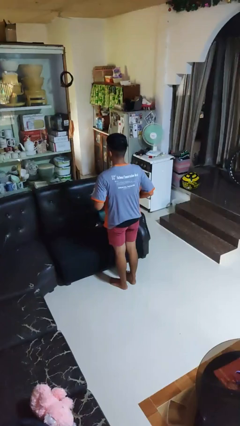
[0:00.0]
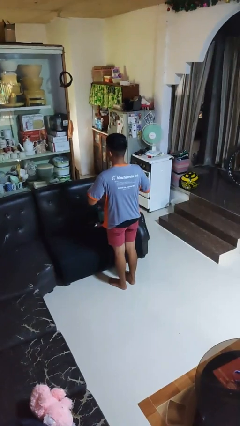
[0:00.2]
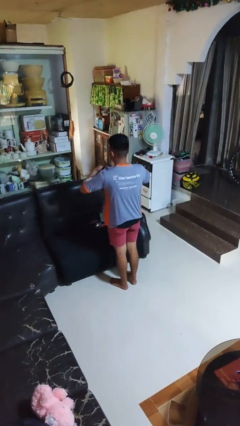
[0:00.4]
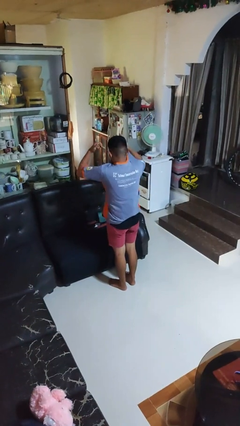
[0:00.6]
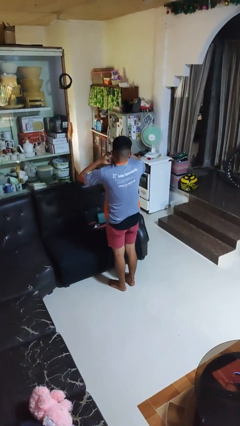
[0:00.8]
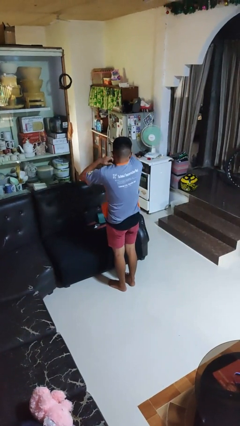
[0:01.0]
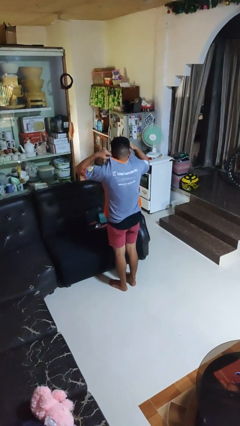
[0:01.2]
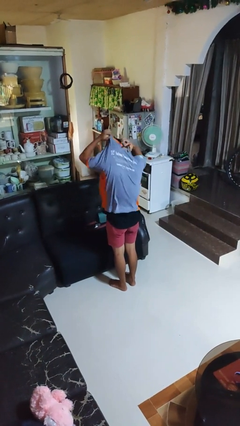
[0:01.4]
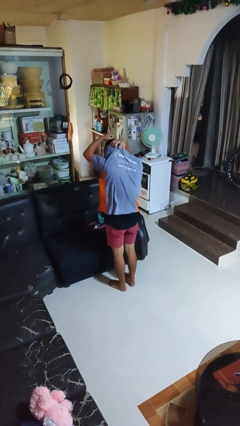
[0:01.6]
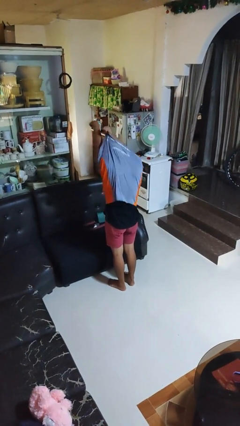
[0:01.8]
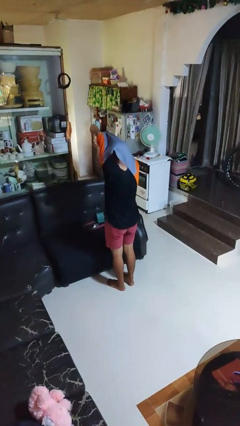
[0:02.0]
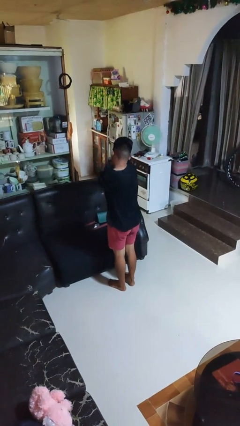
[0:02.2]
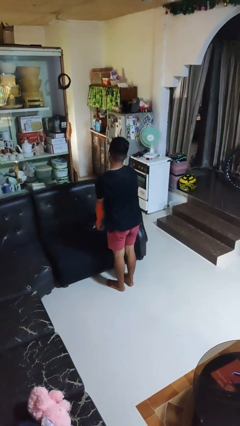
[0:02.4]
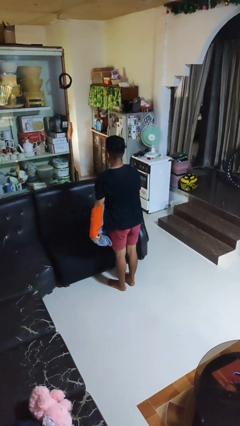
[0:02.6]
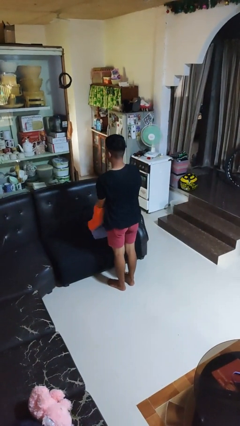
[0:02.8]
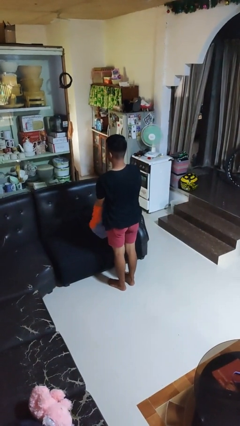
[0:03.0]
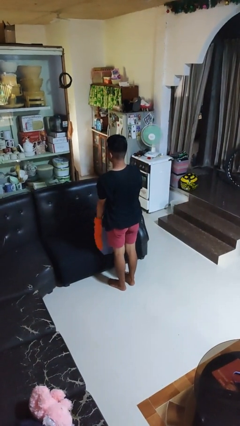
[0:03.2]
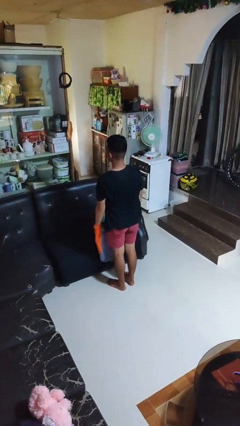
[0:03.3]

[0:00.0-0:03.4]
person takes off shirt

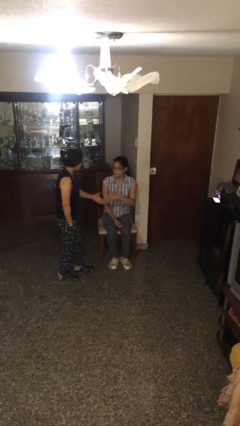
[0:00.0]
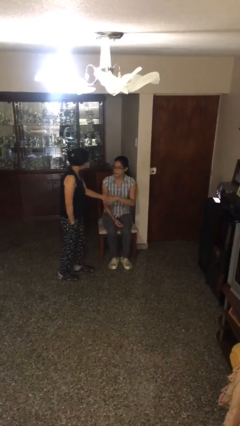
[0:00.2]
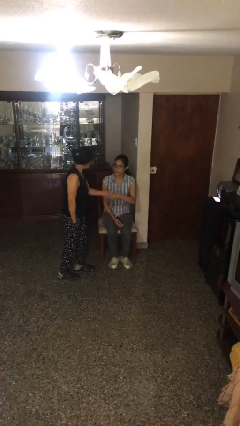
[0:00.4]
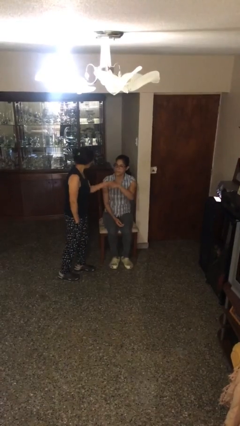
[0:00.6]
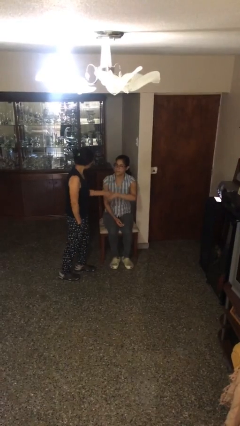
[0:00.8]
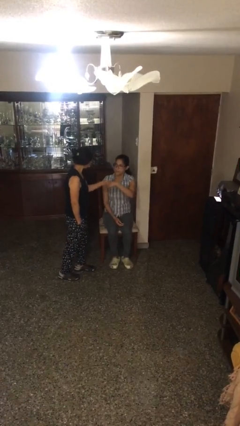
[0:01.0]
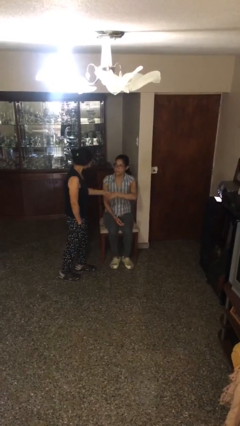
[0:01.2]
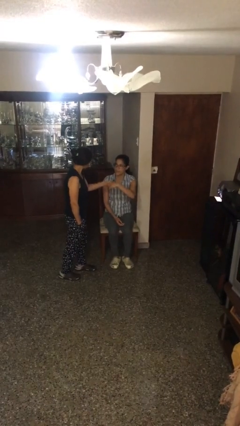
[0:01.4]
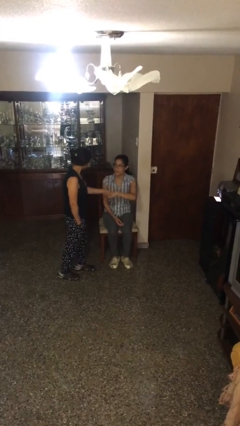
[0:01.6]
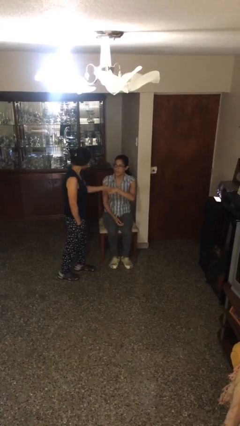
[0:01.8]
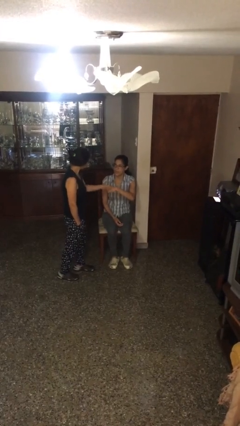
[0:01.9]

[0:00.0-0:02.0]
person shakes hand

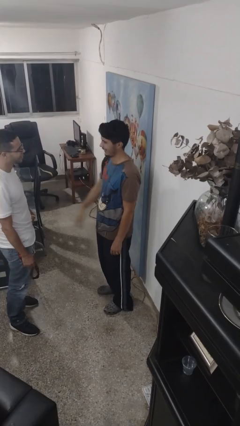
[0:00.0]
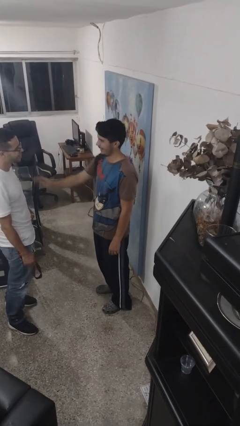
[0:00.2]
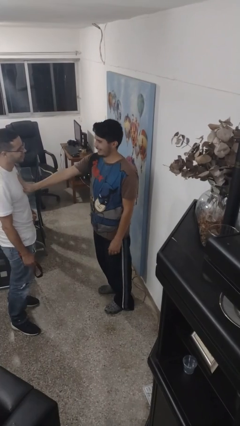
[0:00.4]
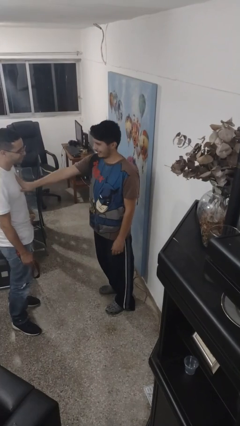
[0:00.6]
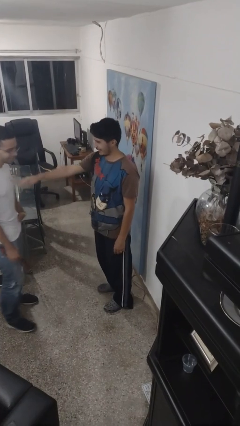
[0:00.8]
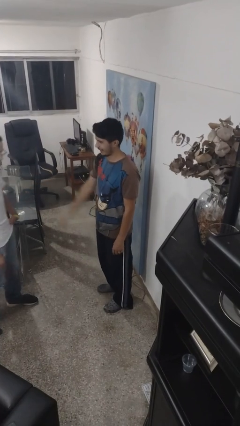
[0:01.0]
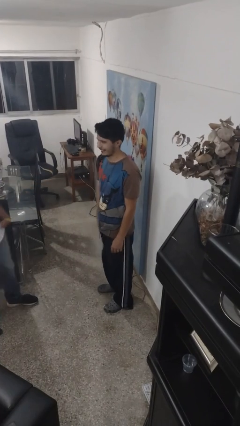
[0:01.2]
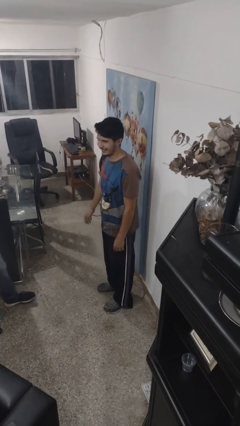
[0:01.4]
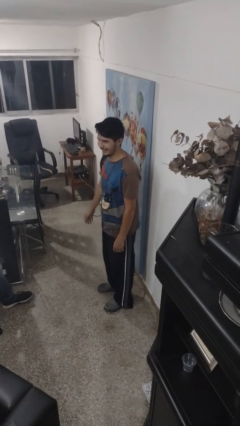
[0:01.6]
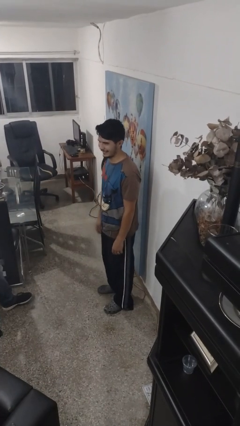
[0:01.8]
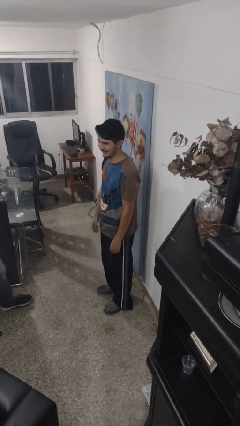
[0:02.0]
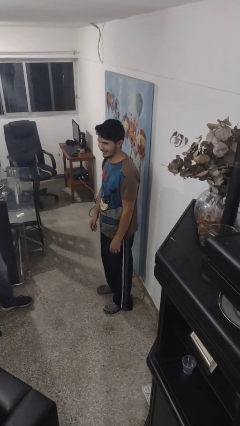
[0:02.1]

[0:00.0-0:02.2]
person shoves person

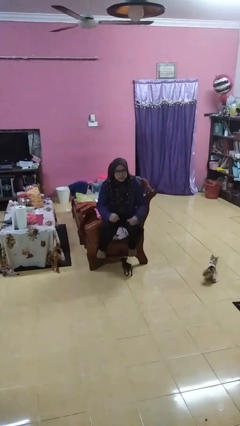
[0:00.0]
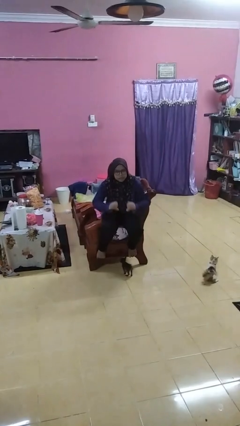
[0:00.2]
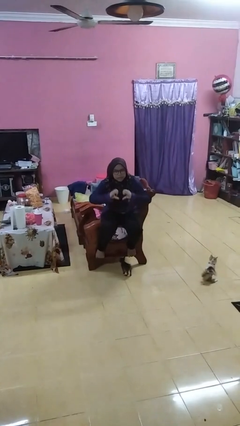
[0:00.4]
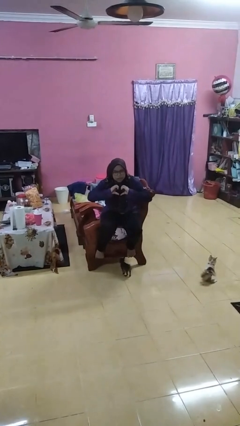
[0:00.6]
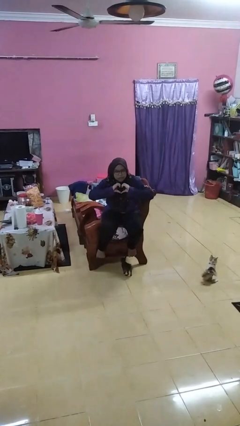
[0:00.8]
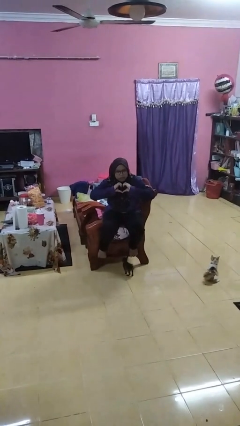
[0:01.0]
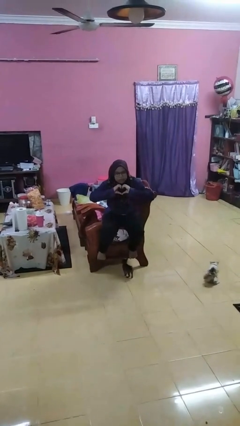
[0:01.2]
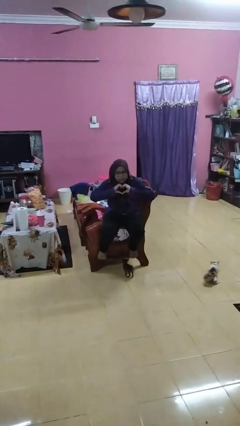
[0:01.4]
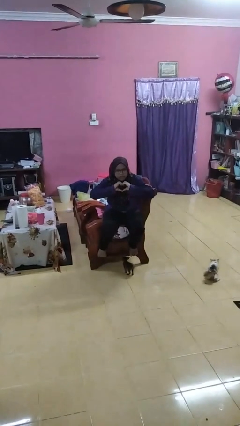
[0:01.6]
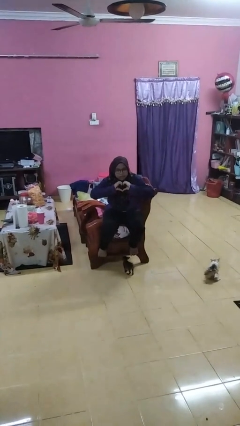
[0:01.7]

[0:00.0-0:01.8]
person gestures heart

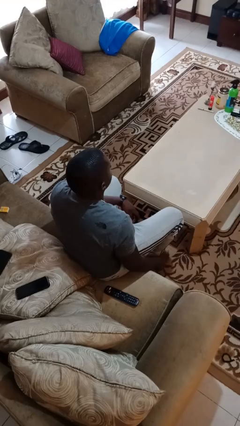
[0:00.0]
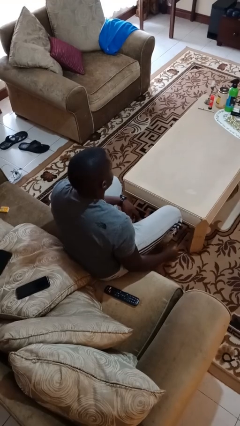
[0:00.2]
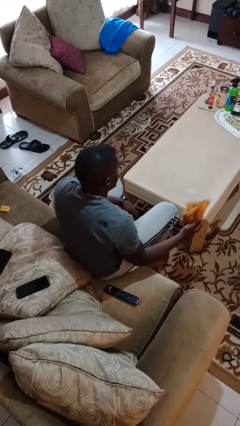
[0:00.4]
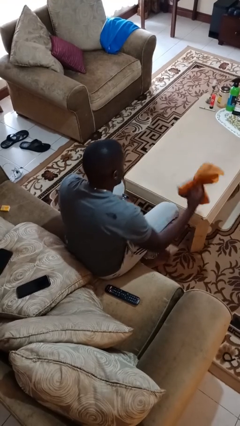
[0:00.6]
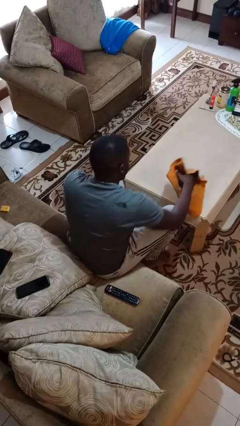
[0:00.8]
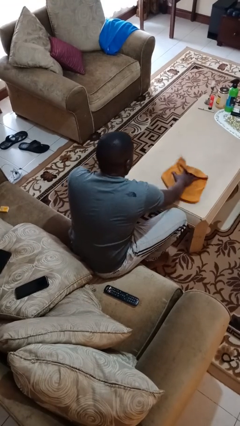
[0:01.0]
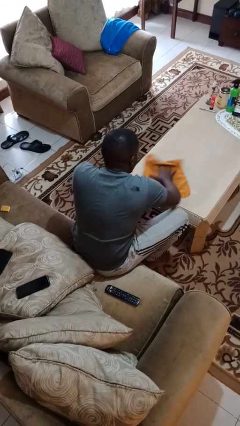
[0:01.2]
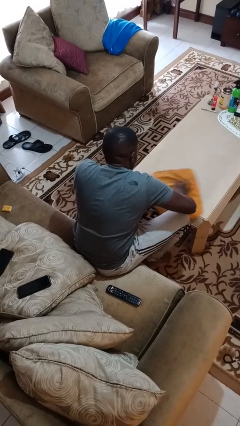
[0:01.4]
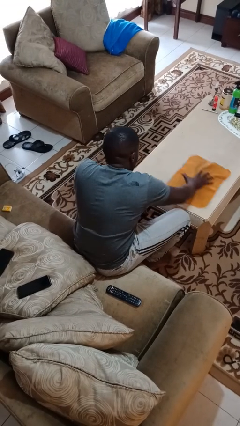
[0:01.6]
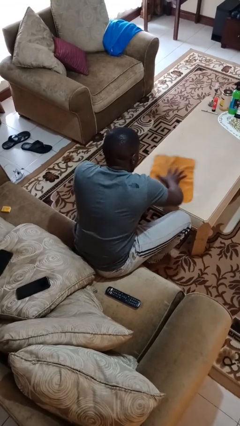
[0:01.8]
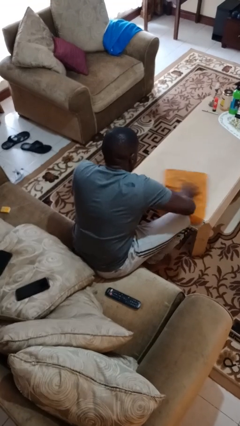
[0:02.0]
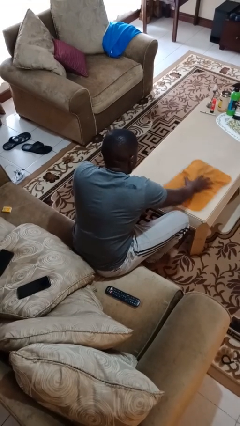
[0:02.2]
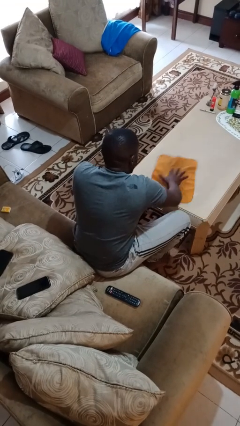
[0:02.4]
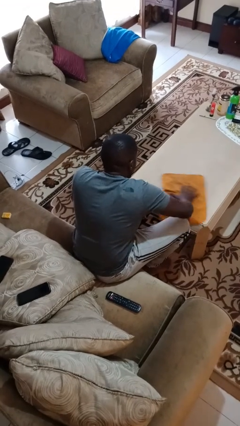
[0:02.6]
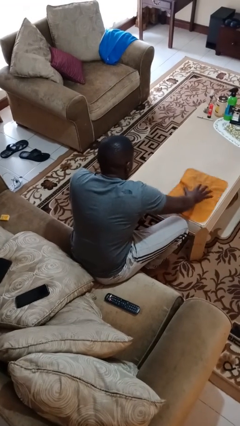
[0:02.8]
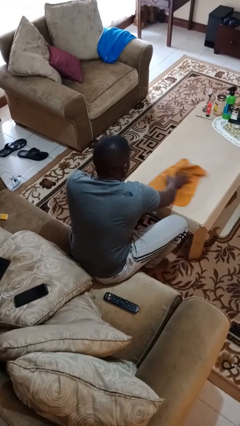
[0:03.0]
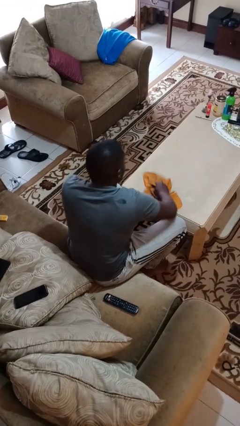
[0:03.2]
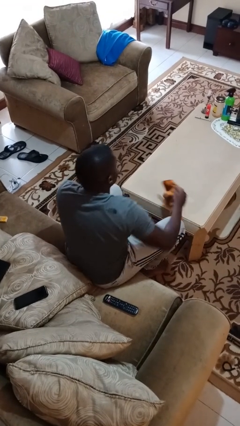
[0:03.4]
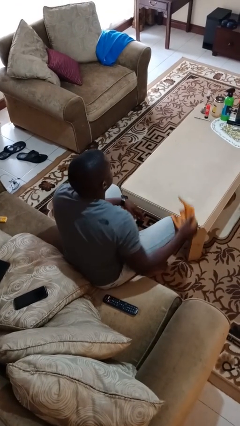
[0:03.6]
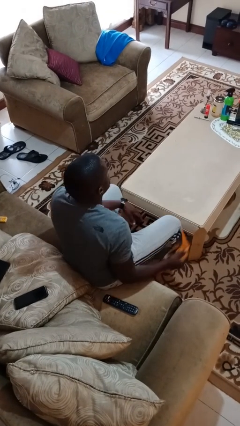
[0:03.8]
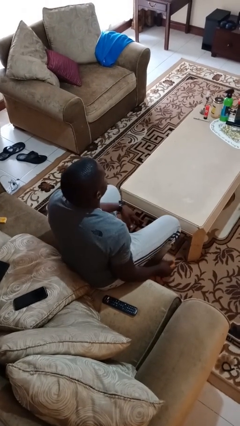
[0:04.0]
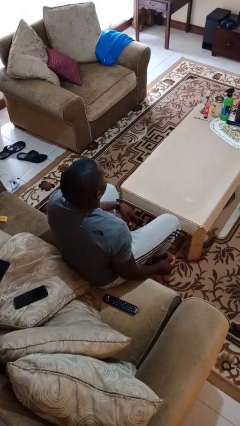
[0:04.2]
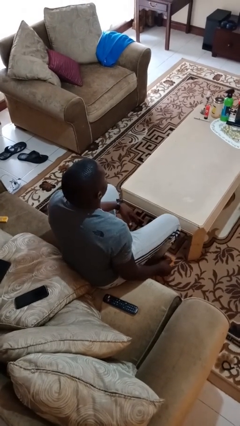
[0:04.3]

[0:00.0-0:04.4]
person cleans table with rag

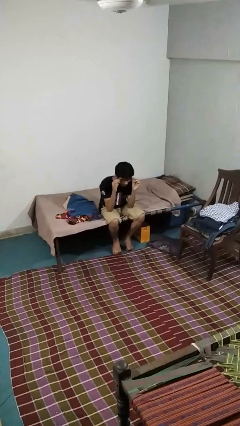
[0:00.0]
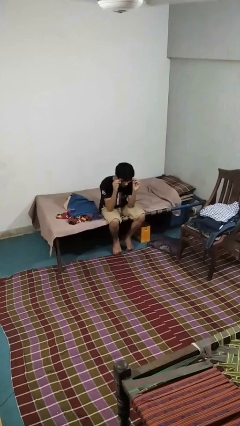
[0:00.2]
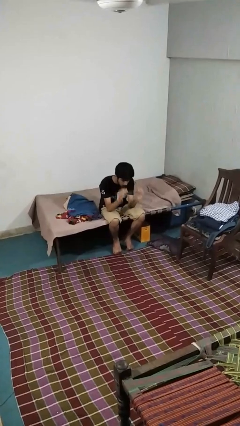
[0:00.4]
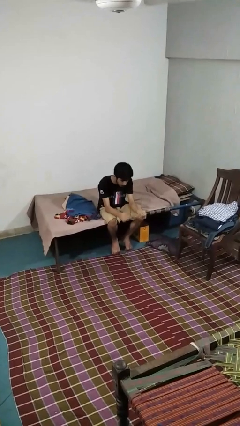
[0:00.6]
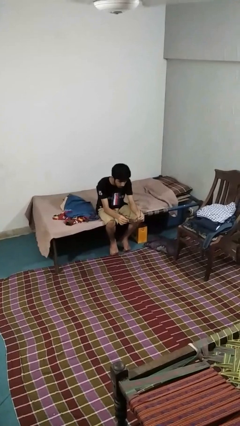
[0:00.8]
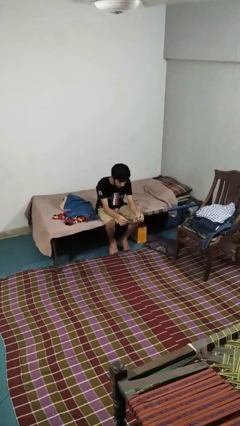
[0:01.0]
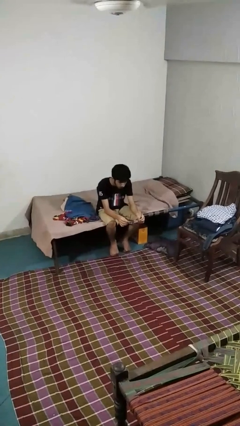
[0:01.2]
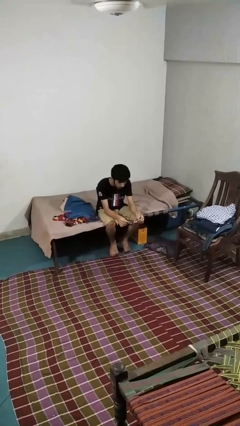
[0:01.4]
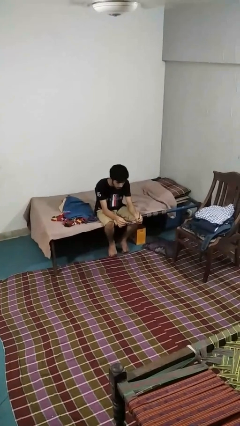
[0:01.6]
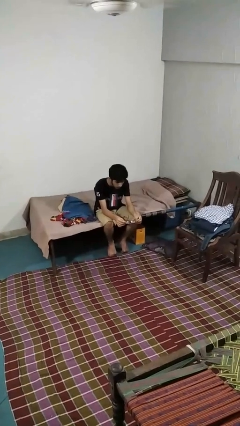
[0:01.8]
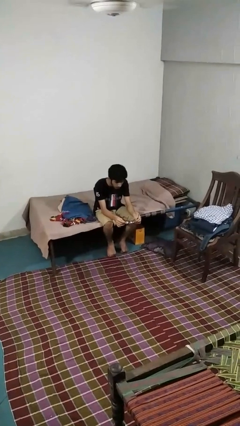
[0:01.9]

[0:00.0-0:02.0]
person takes off glasses

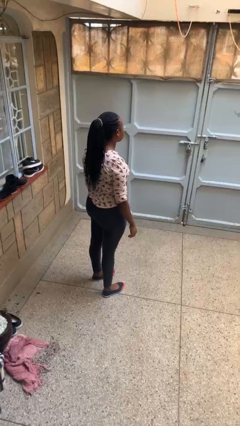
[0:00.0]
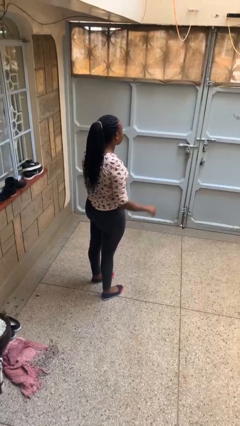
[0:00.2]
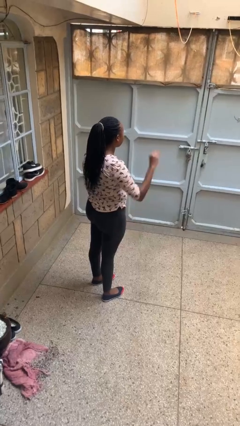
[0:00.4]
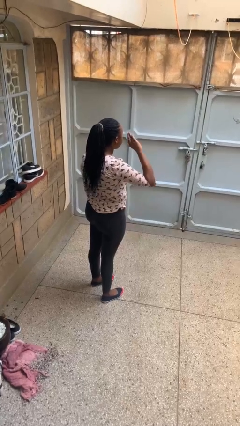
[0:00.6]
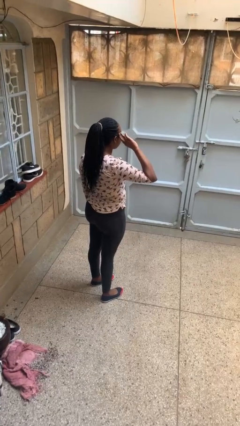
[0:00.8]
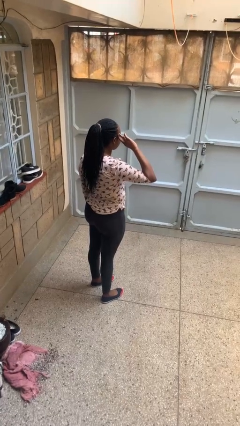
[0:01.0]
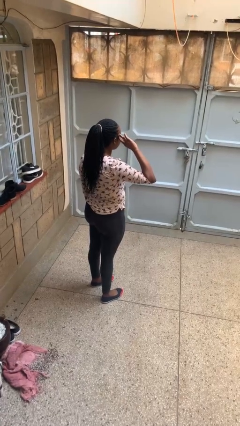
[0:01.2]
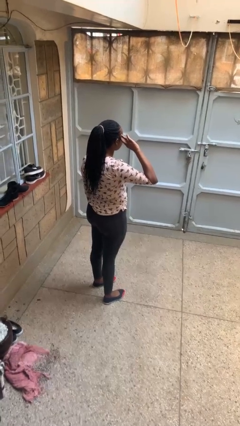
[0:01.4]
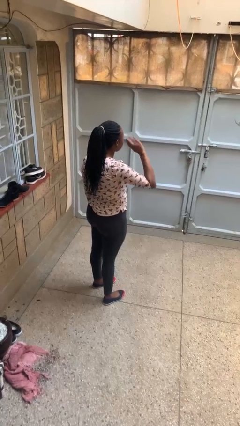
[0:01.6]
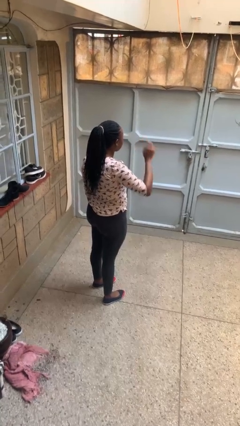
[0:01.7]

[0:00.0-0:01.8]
person salutes
